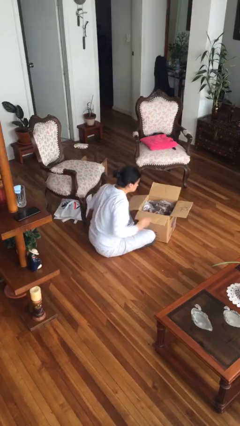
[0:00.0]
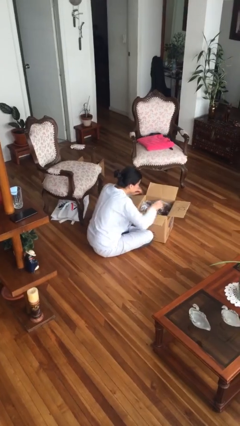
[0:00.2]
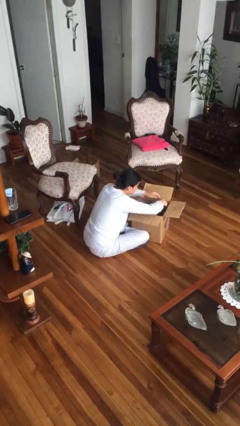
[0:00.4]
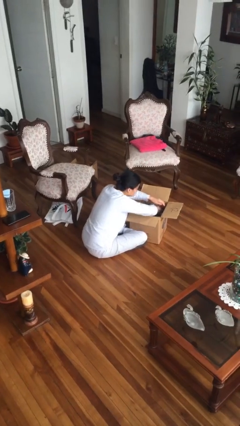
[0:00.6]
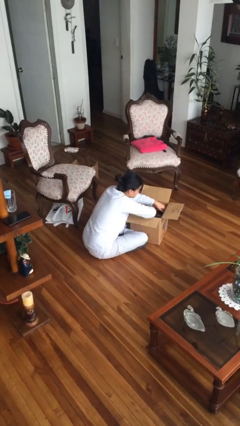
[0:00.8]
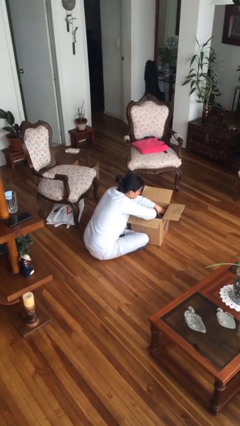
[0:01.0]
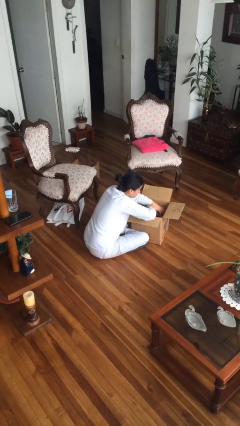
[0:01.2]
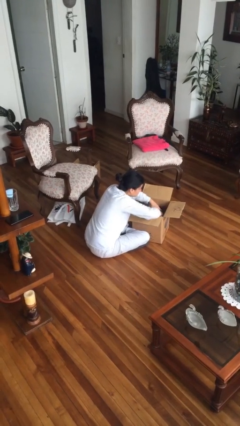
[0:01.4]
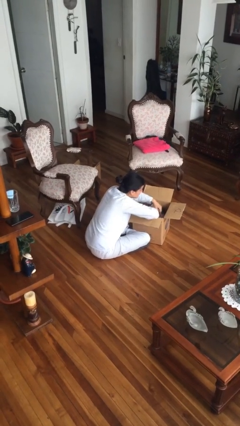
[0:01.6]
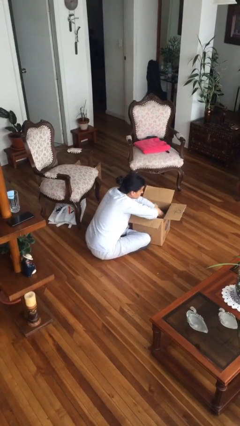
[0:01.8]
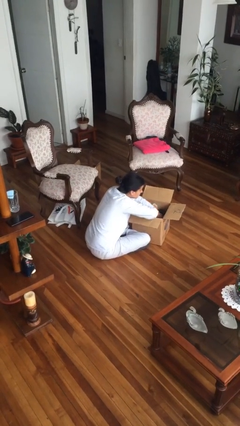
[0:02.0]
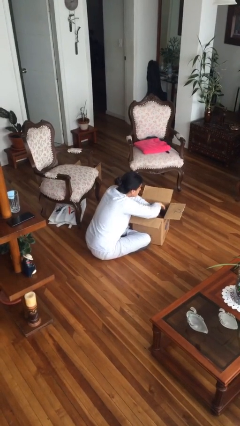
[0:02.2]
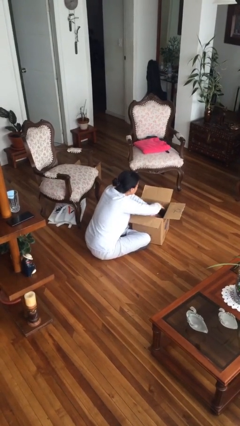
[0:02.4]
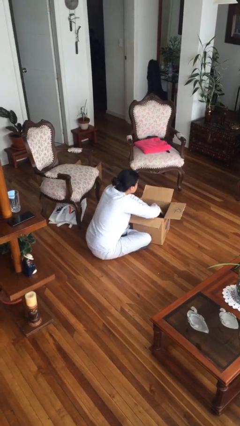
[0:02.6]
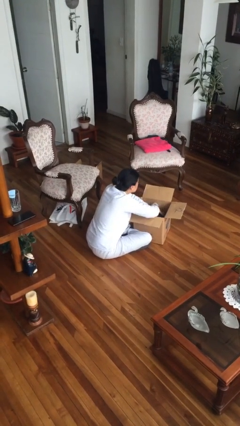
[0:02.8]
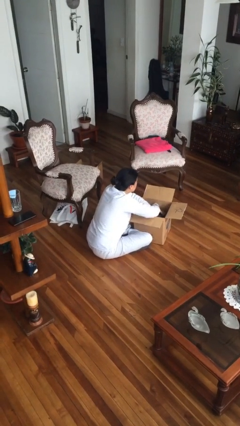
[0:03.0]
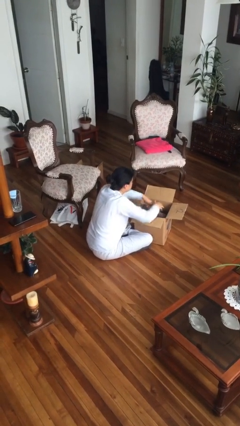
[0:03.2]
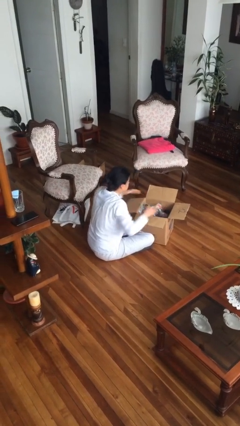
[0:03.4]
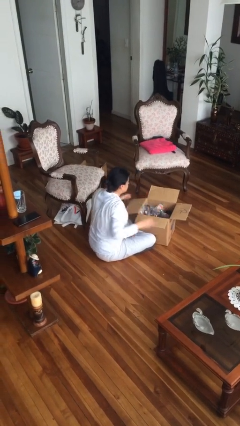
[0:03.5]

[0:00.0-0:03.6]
person searches in box

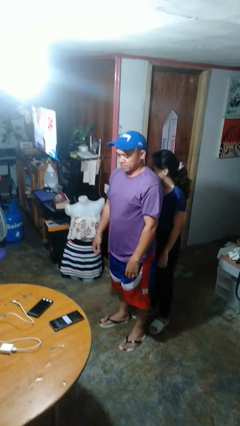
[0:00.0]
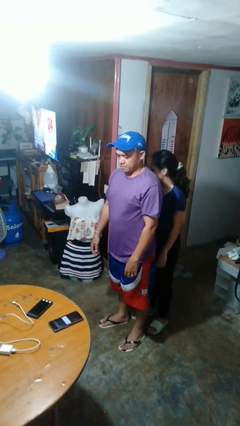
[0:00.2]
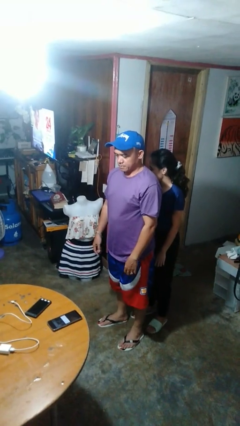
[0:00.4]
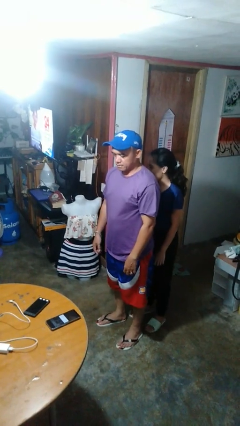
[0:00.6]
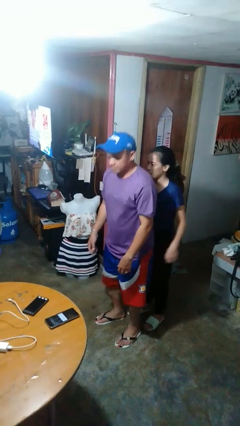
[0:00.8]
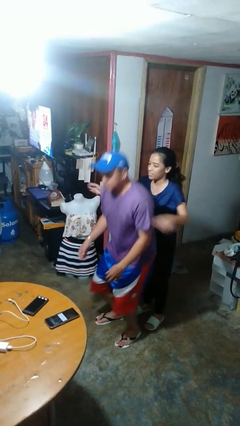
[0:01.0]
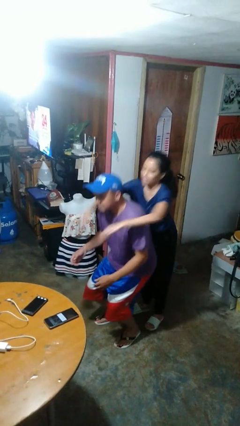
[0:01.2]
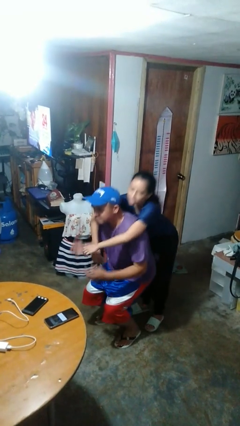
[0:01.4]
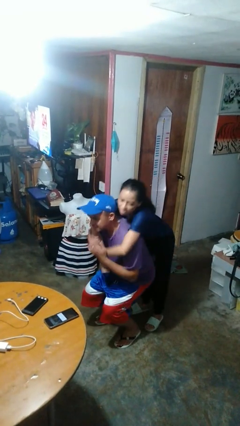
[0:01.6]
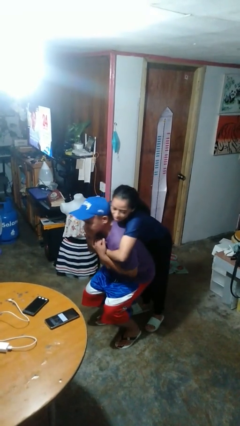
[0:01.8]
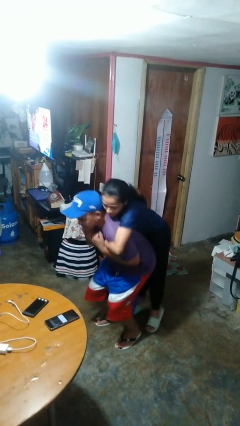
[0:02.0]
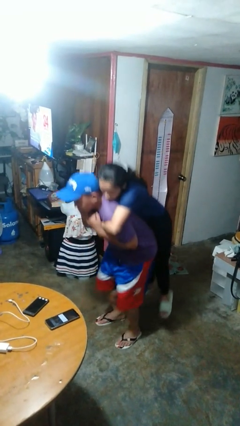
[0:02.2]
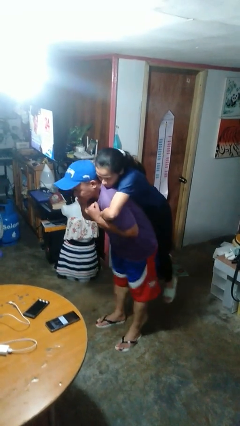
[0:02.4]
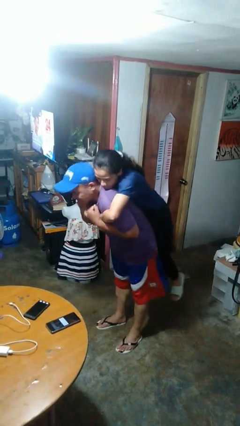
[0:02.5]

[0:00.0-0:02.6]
person picks up person

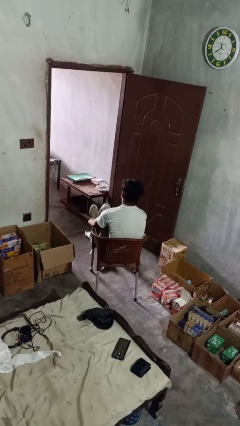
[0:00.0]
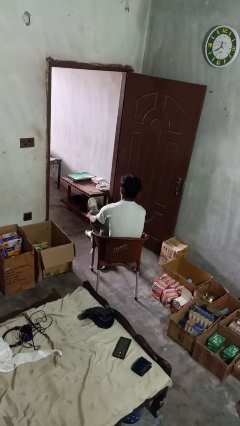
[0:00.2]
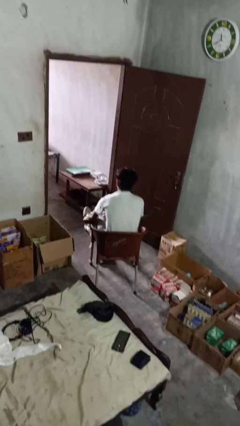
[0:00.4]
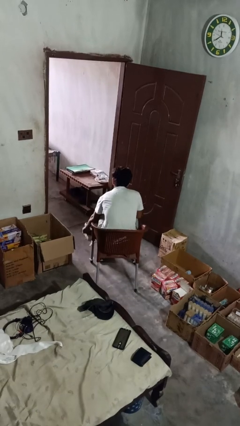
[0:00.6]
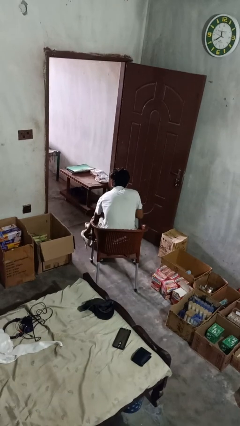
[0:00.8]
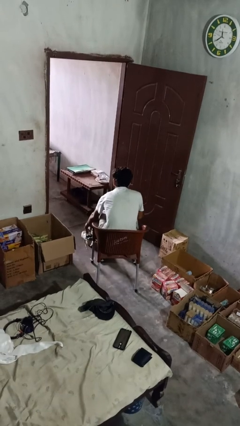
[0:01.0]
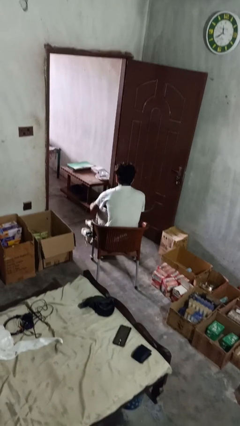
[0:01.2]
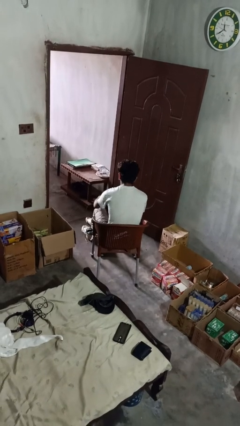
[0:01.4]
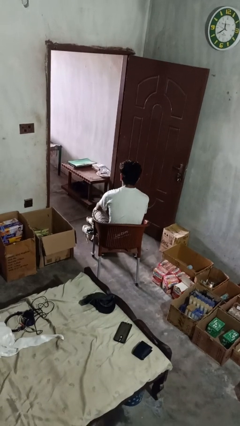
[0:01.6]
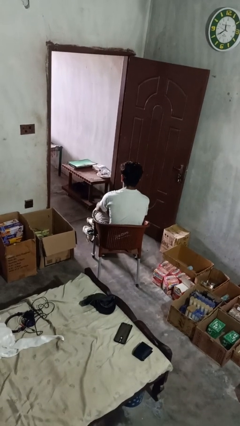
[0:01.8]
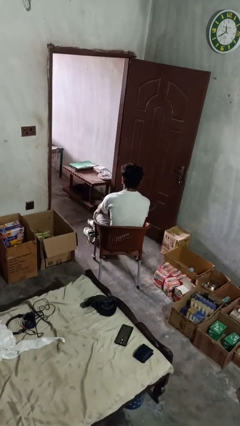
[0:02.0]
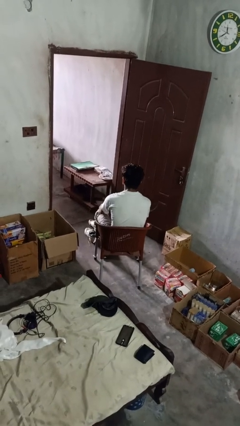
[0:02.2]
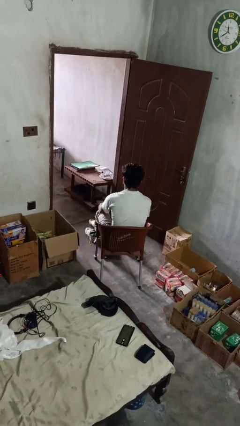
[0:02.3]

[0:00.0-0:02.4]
person takes off shoes

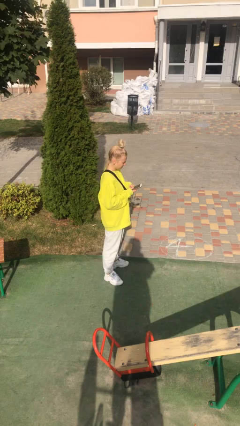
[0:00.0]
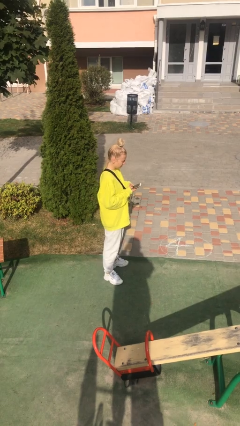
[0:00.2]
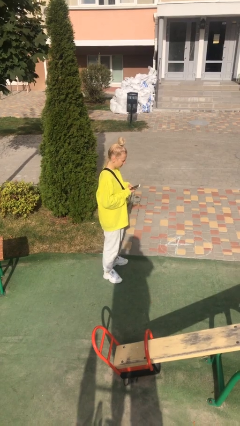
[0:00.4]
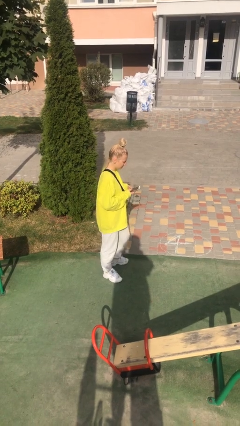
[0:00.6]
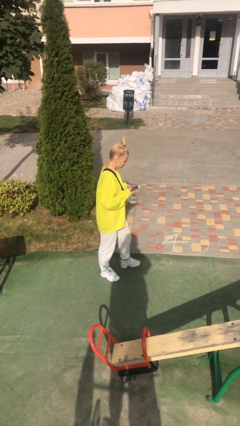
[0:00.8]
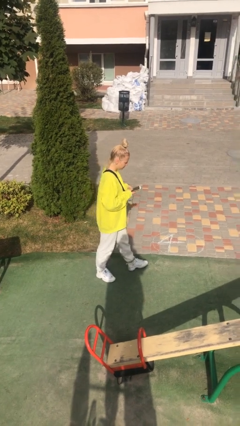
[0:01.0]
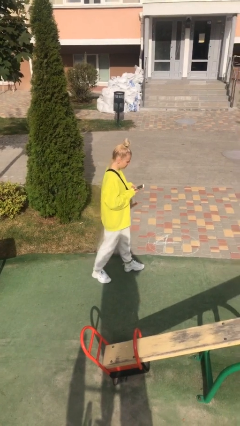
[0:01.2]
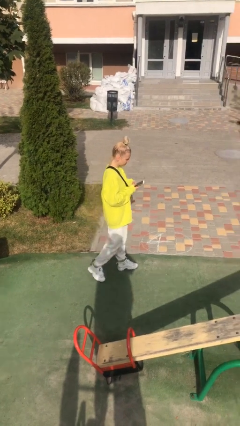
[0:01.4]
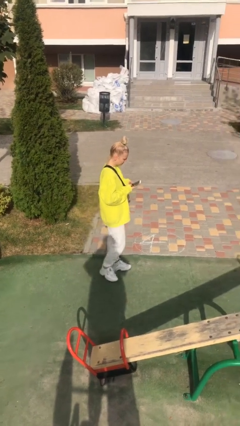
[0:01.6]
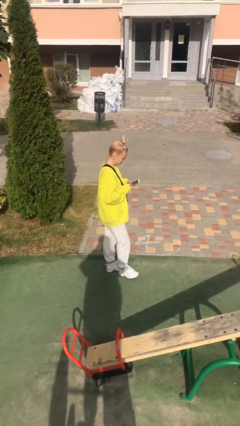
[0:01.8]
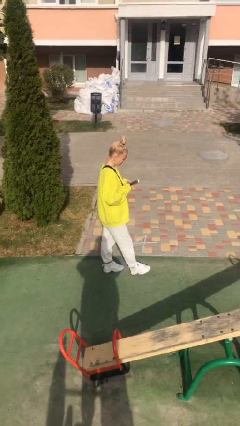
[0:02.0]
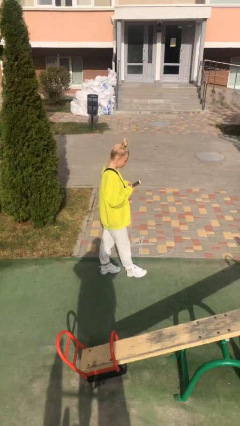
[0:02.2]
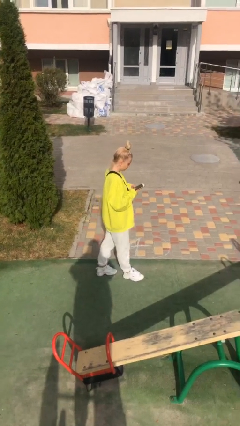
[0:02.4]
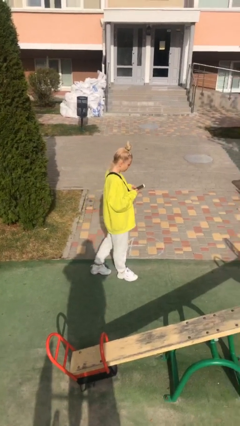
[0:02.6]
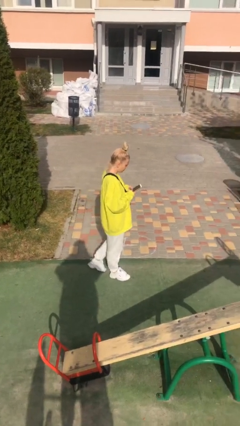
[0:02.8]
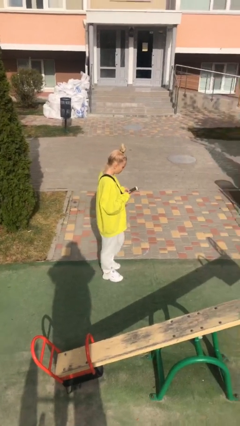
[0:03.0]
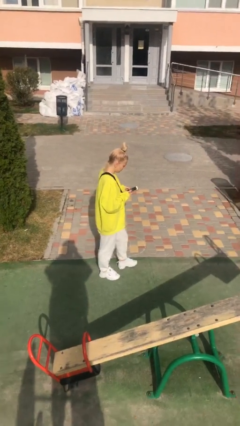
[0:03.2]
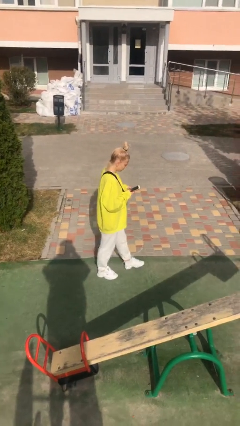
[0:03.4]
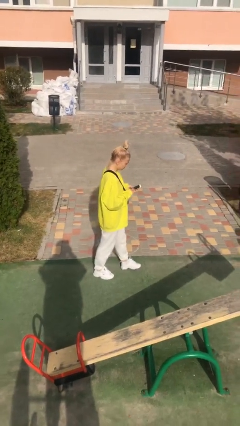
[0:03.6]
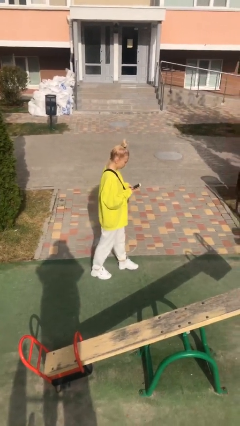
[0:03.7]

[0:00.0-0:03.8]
person texts on phone

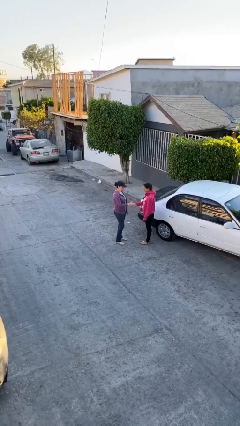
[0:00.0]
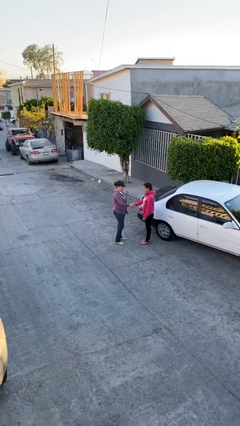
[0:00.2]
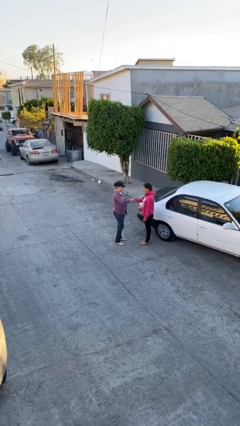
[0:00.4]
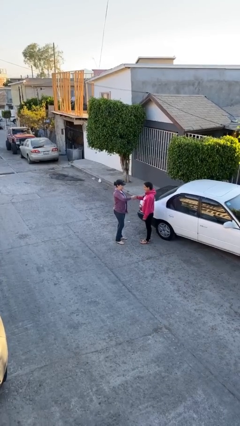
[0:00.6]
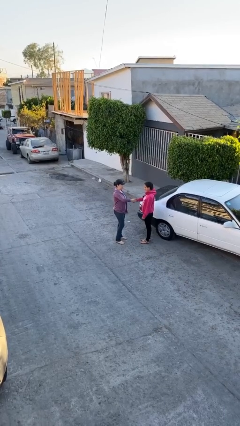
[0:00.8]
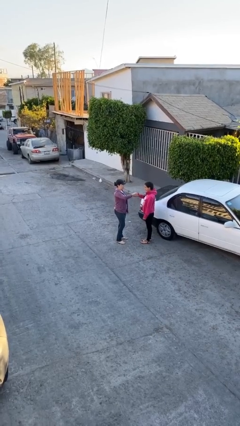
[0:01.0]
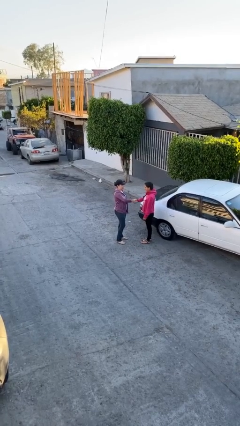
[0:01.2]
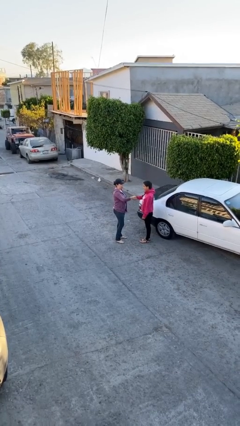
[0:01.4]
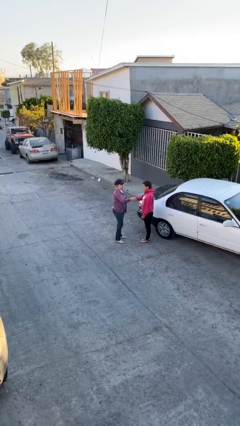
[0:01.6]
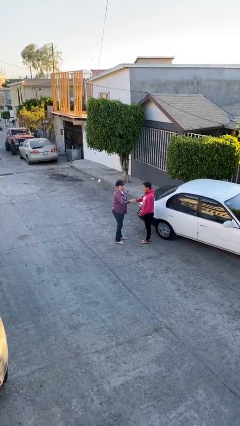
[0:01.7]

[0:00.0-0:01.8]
person shakes hand

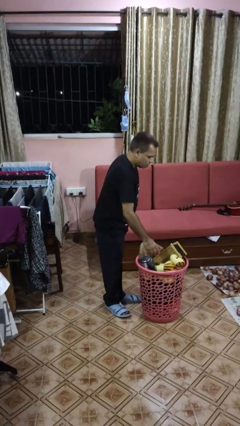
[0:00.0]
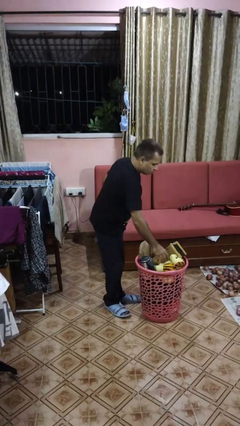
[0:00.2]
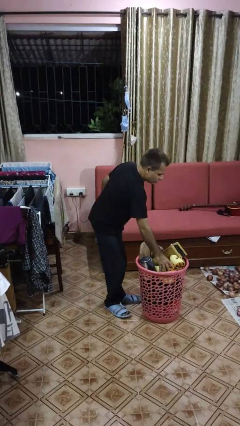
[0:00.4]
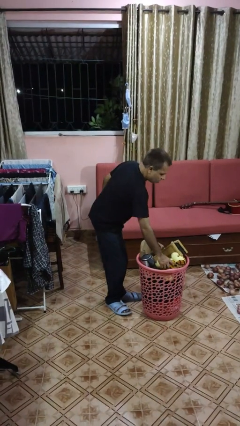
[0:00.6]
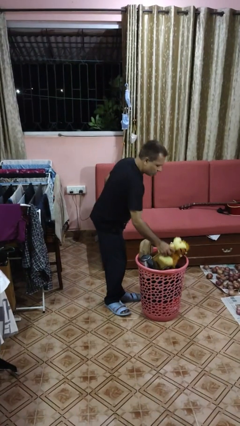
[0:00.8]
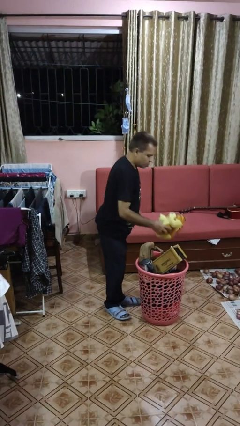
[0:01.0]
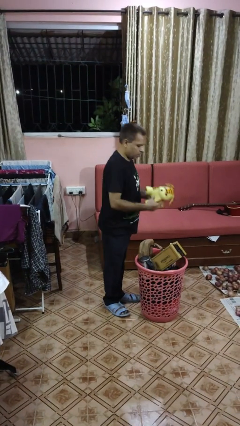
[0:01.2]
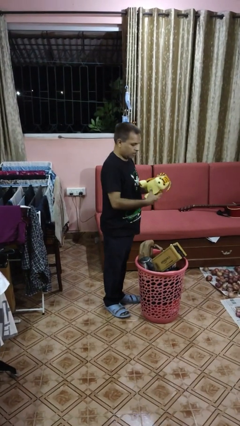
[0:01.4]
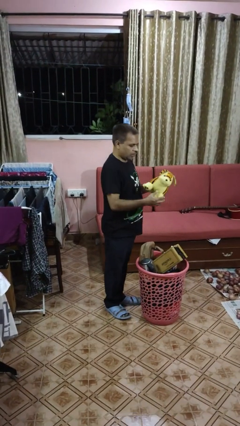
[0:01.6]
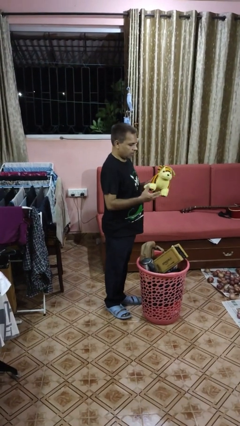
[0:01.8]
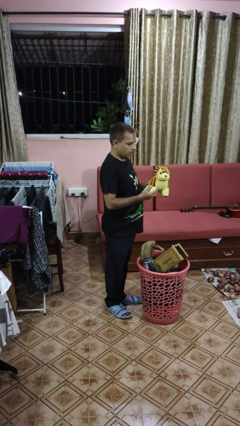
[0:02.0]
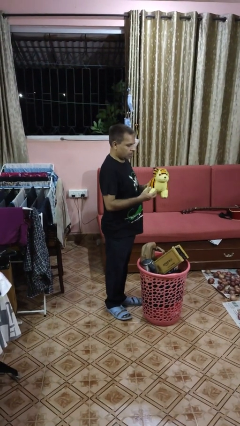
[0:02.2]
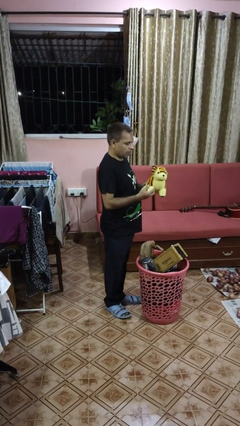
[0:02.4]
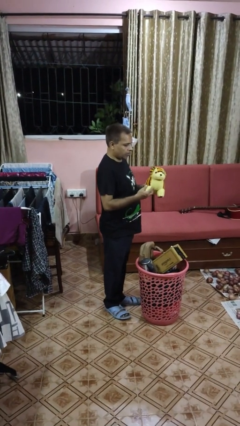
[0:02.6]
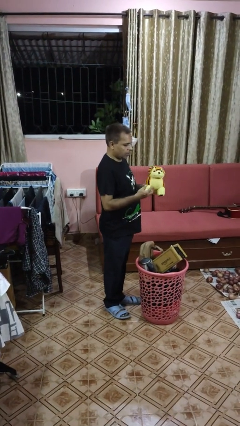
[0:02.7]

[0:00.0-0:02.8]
person takes object from basket

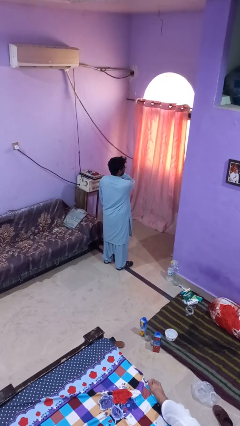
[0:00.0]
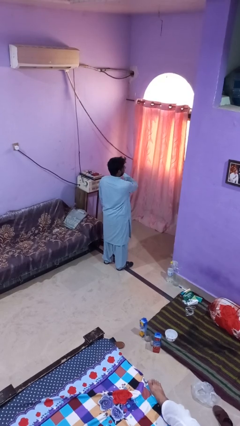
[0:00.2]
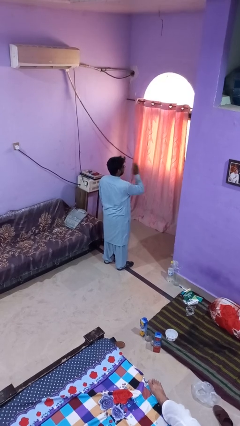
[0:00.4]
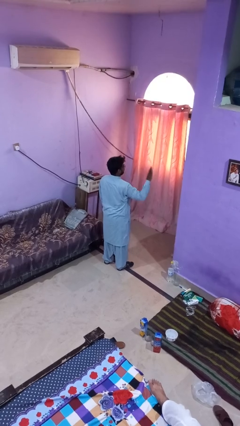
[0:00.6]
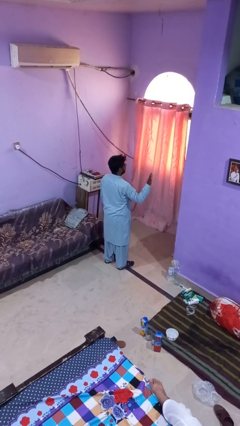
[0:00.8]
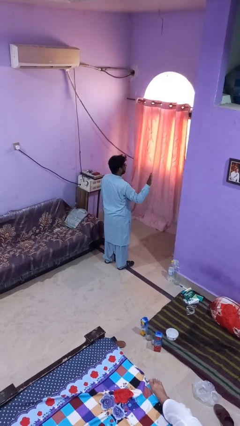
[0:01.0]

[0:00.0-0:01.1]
person gestures swipe right
